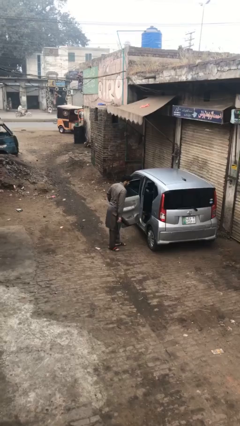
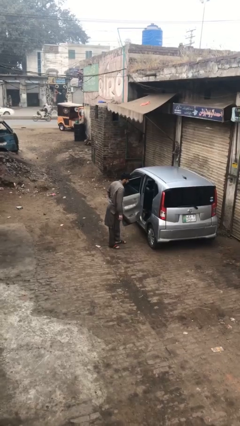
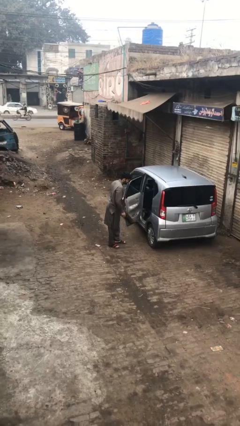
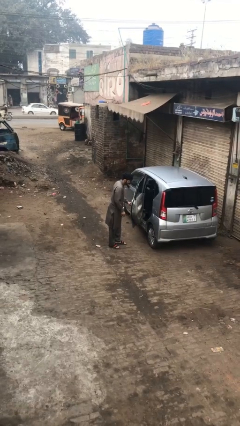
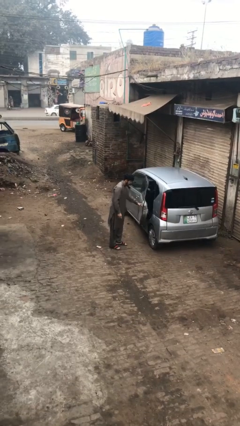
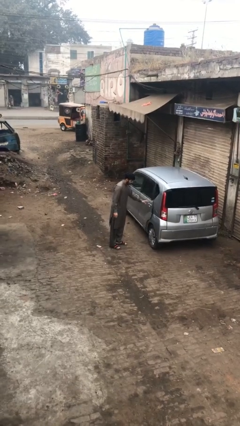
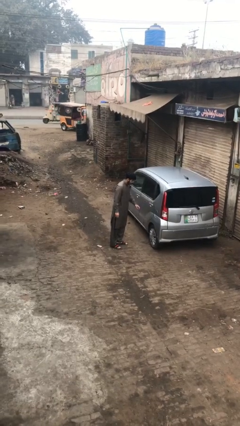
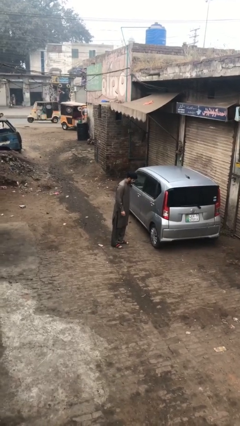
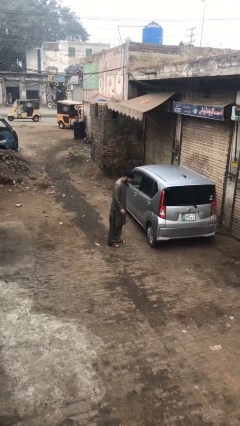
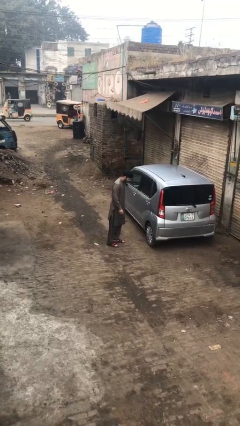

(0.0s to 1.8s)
person closes car door

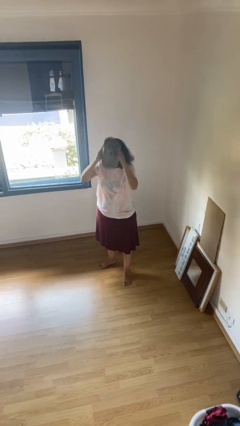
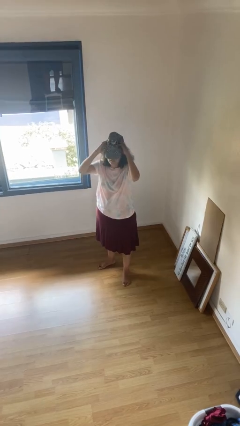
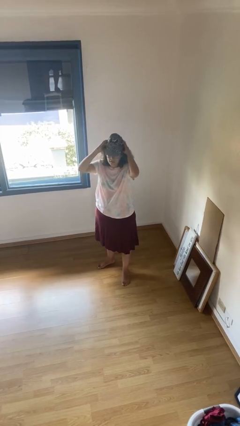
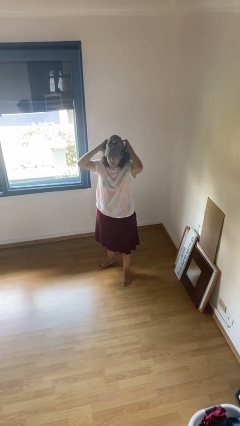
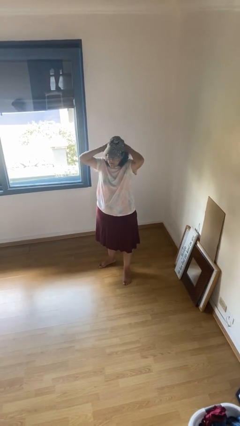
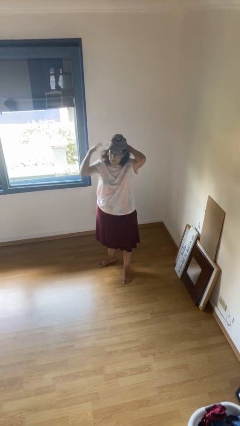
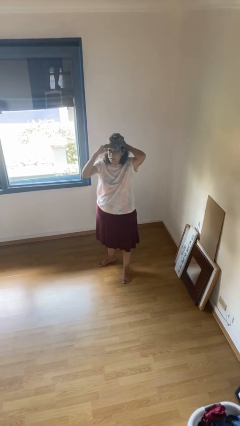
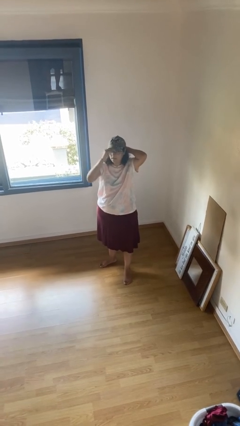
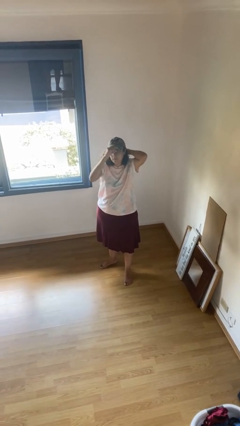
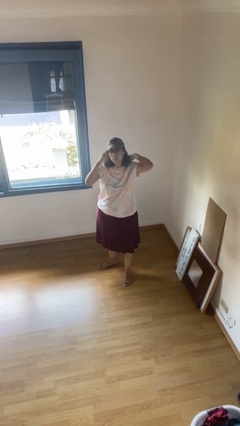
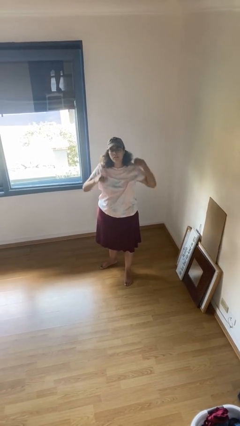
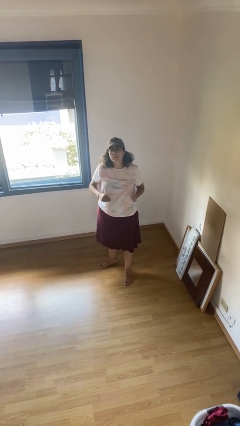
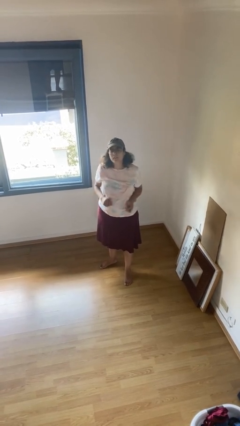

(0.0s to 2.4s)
person puts on hat

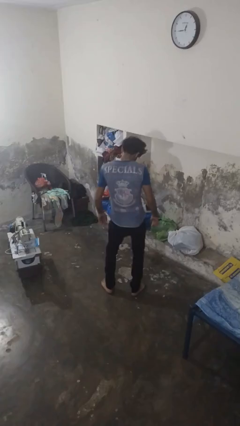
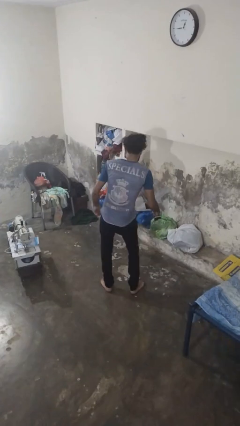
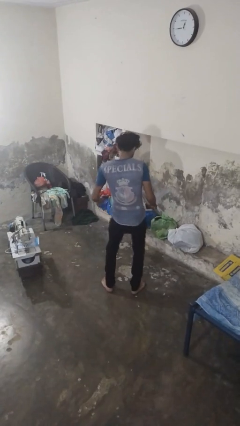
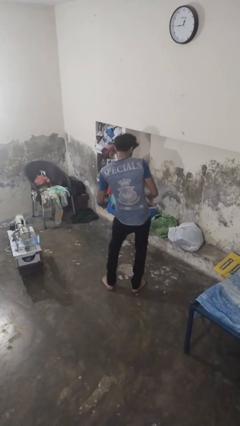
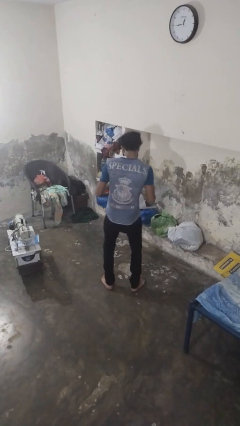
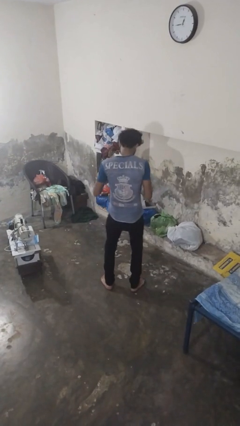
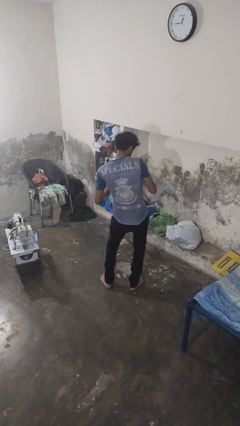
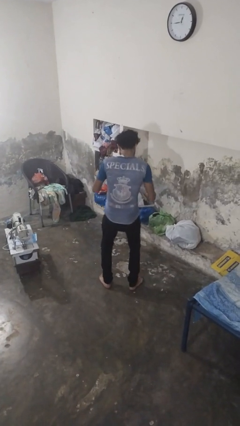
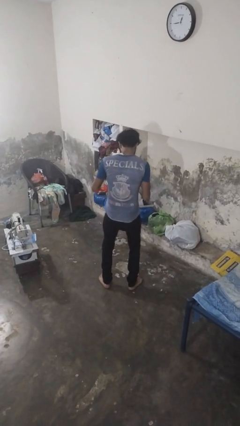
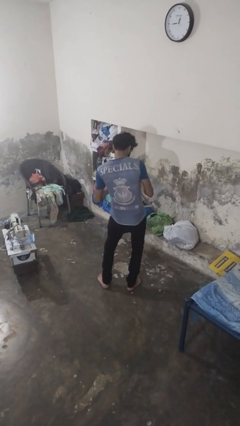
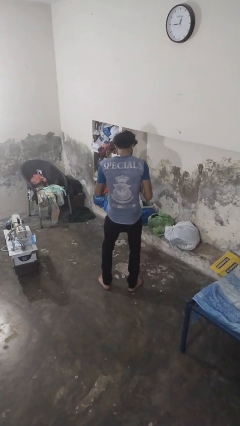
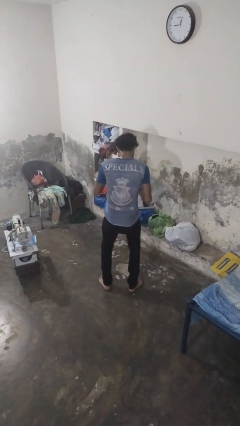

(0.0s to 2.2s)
person wiggles hips

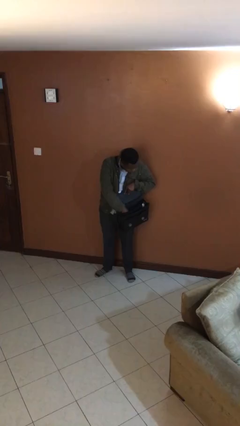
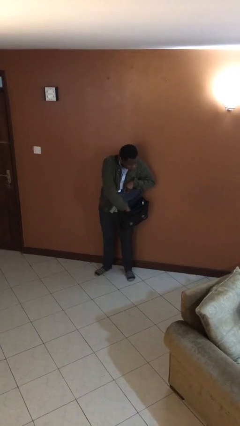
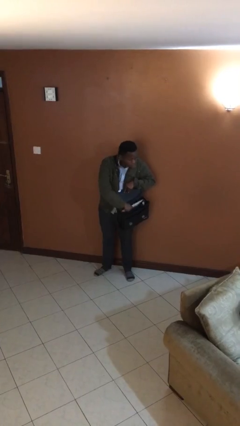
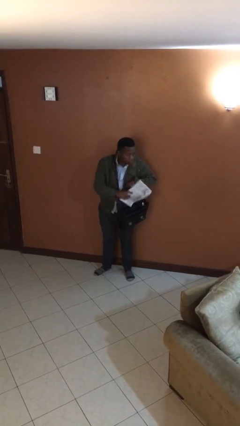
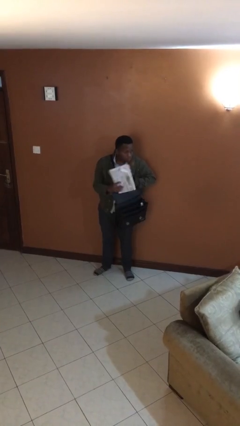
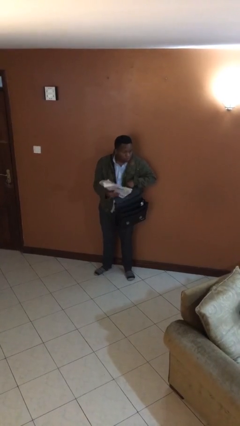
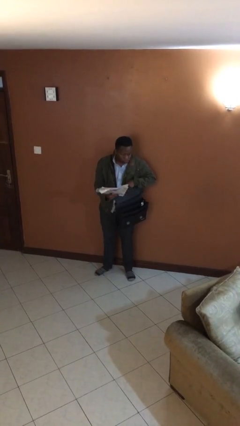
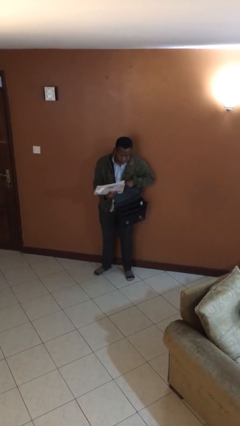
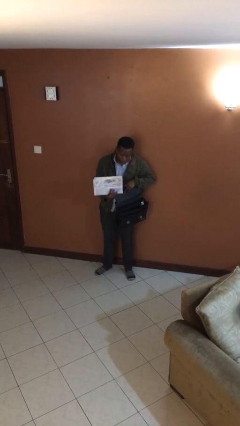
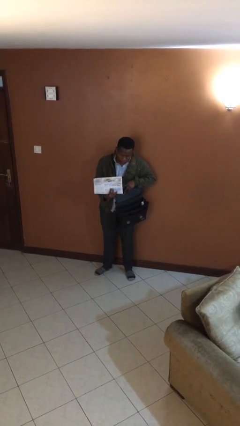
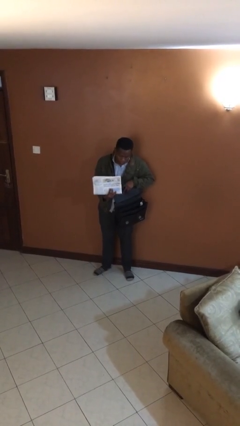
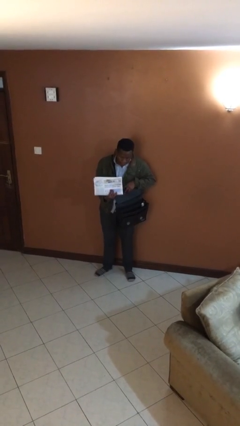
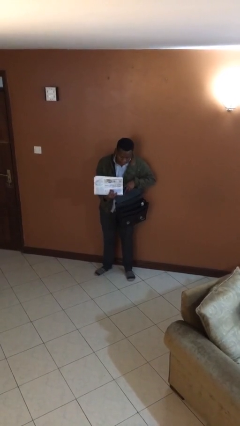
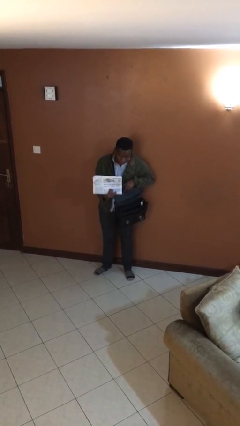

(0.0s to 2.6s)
person takes object from purse

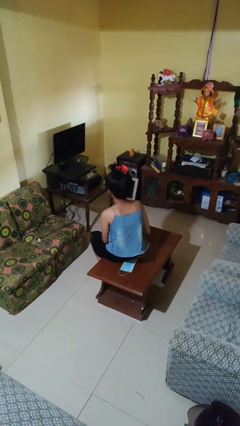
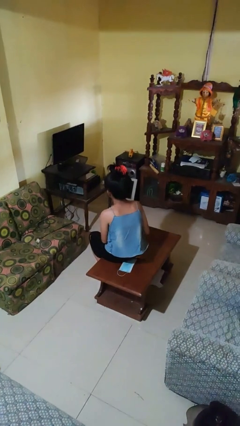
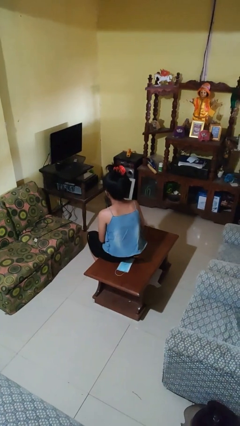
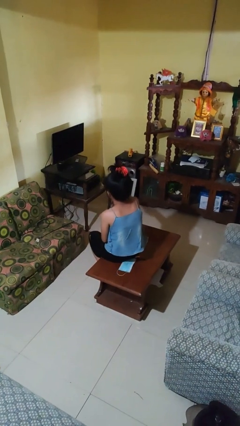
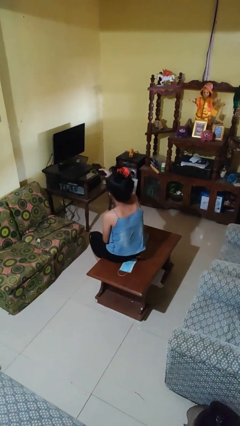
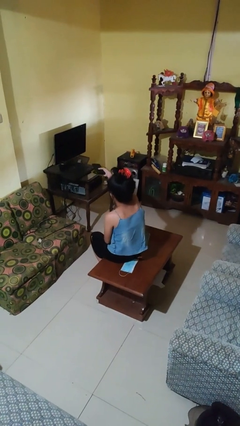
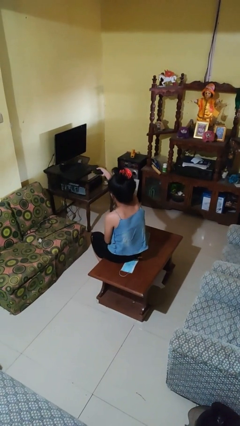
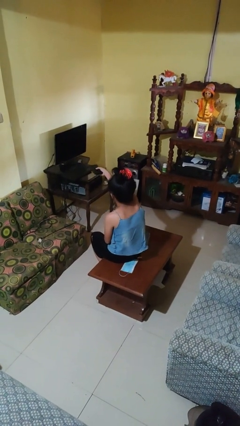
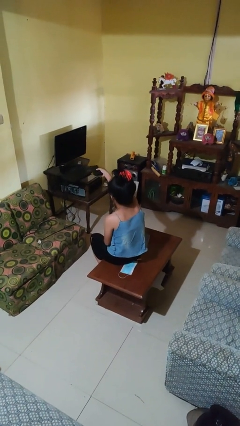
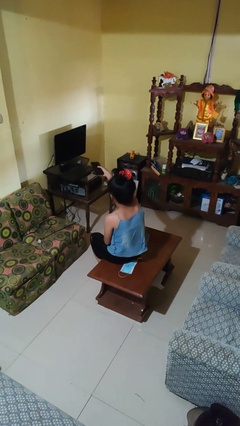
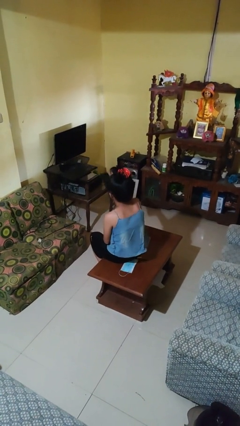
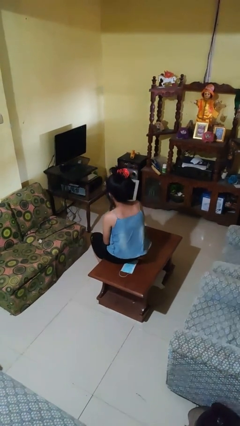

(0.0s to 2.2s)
person uses television remote

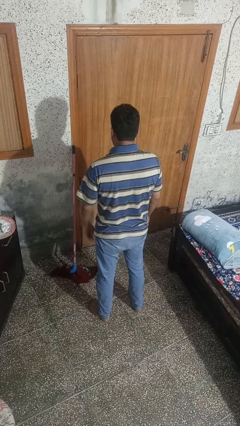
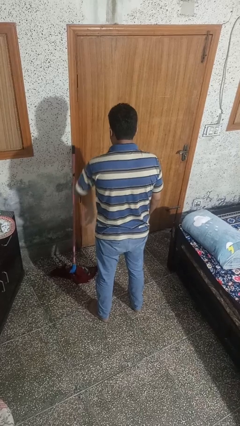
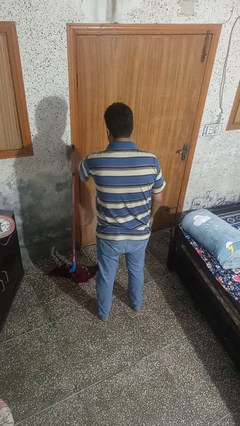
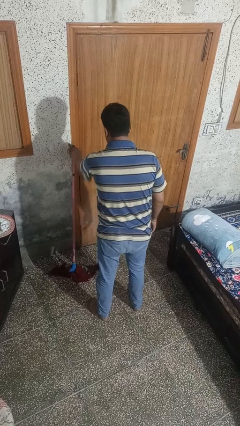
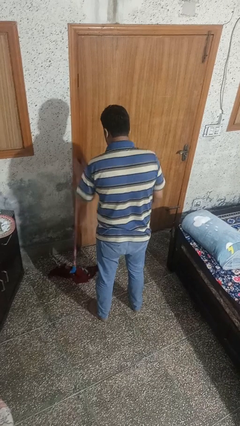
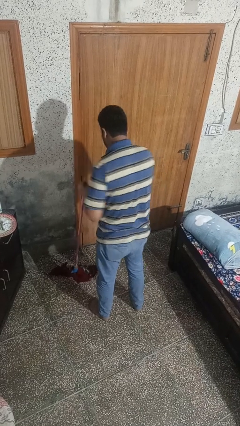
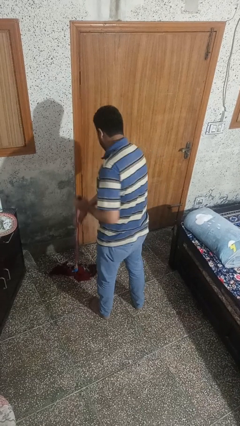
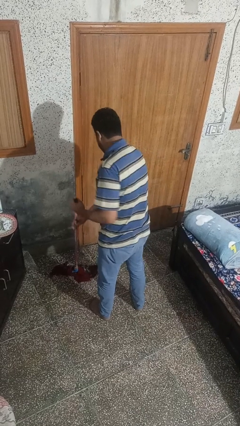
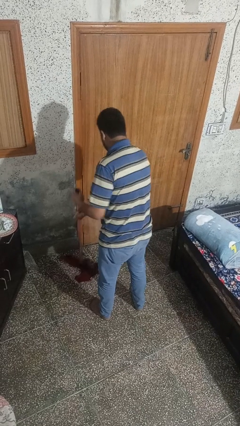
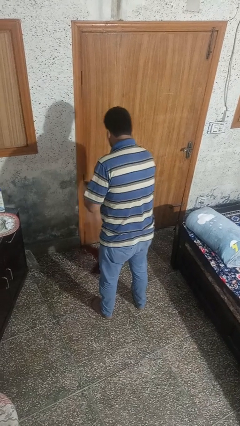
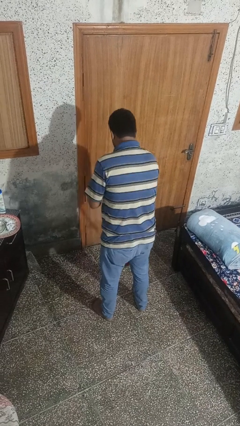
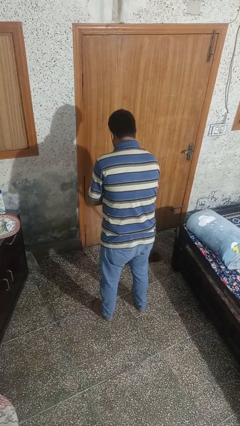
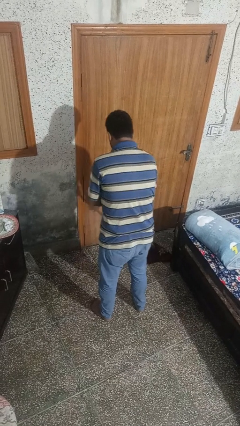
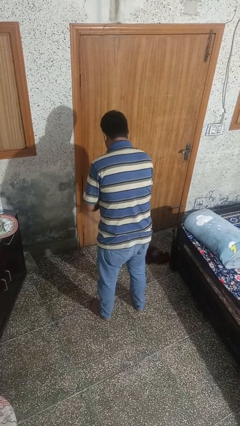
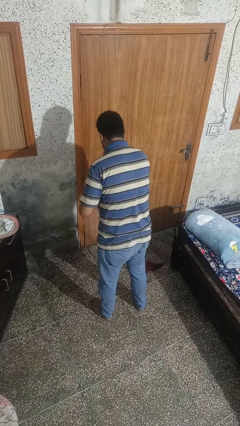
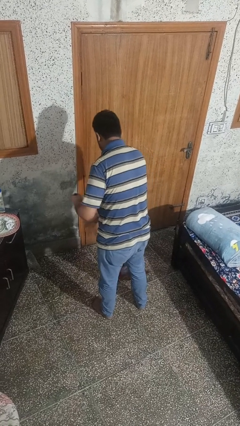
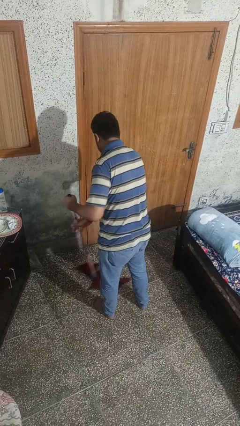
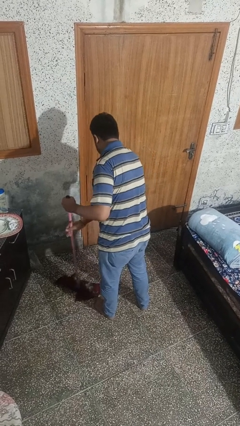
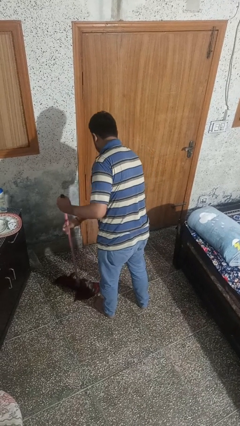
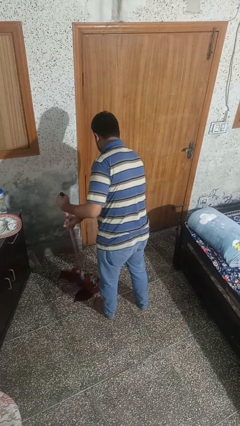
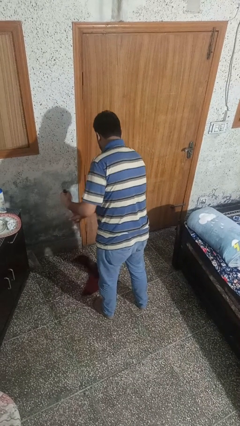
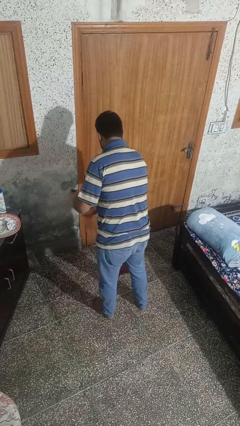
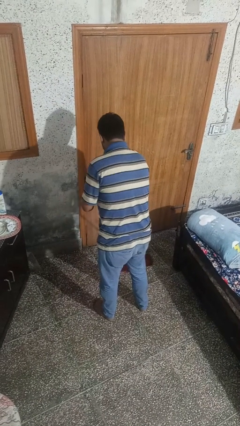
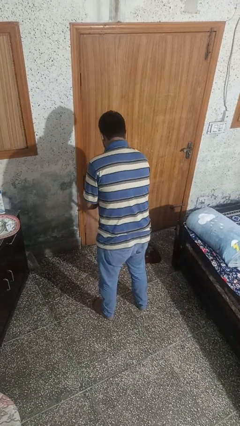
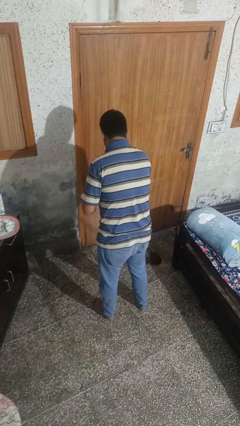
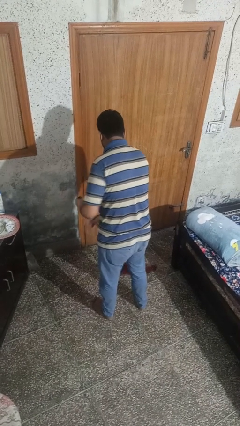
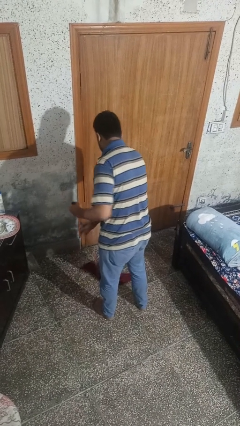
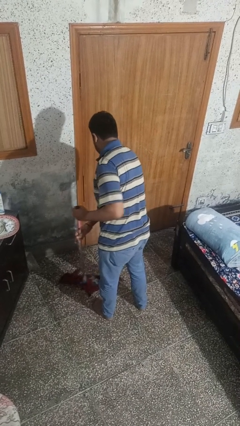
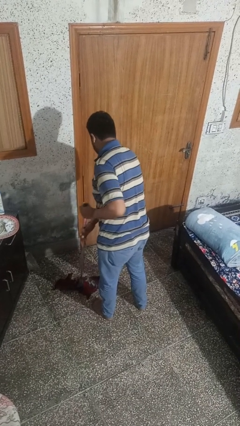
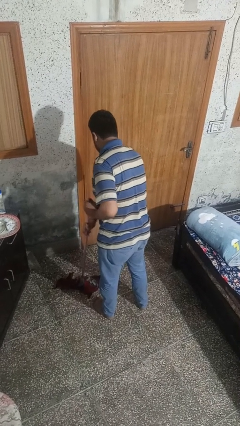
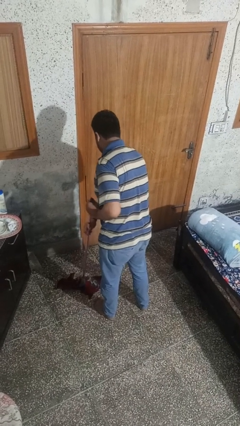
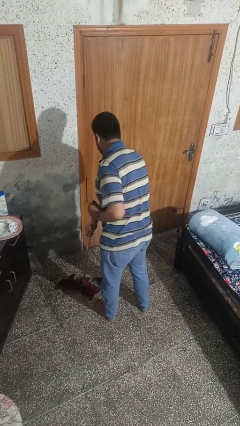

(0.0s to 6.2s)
person mops
